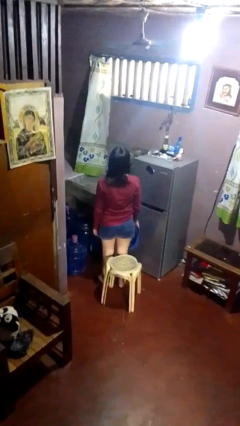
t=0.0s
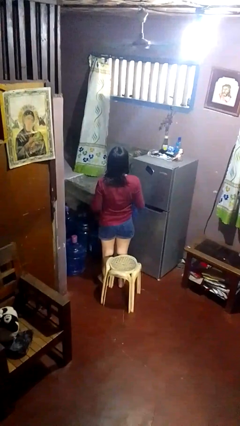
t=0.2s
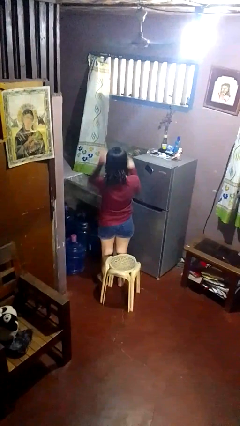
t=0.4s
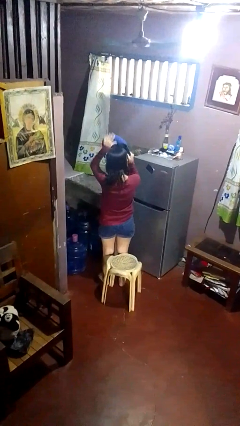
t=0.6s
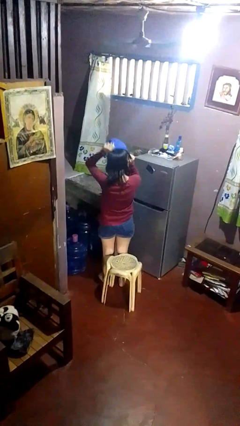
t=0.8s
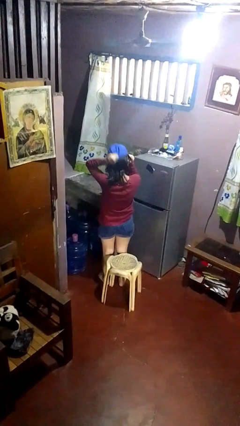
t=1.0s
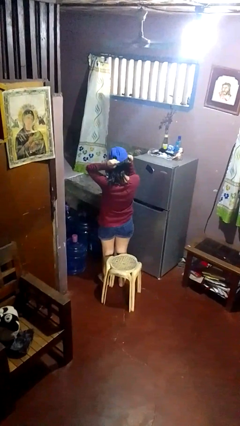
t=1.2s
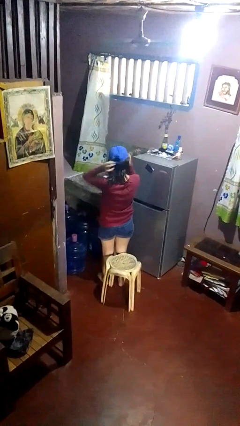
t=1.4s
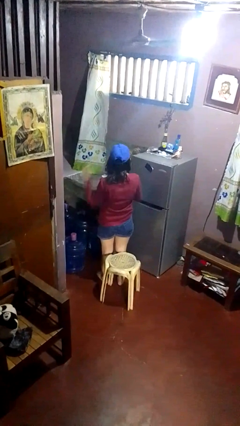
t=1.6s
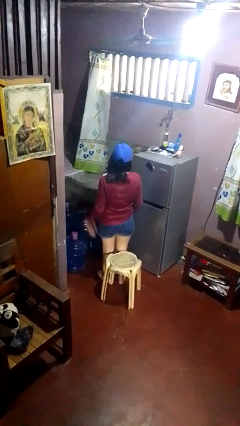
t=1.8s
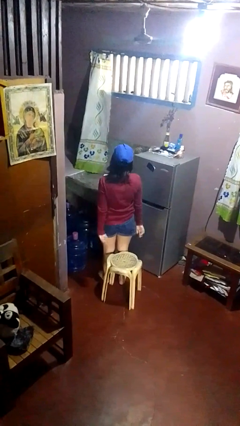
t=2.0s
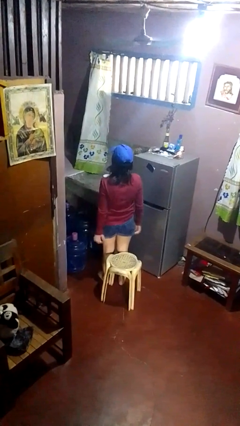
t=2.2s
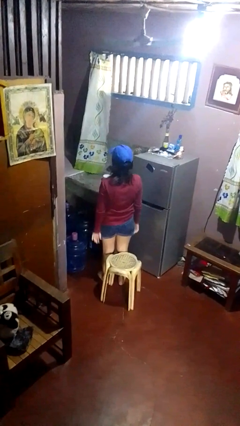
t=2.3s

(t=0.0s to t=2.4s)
person puts on hat

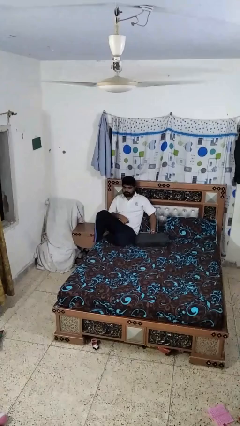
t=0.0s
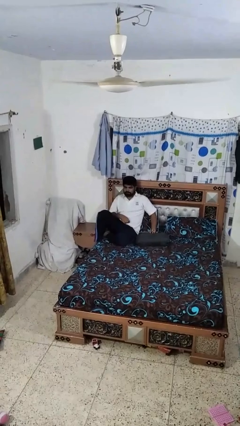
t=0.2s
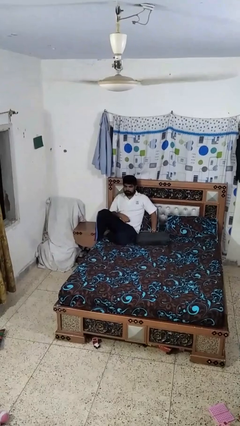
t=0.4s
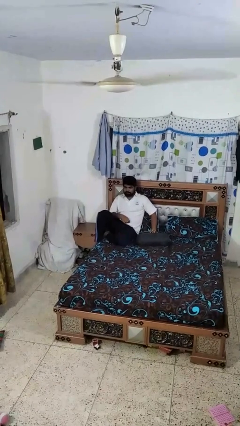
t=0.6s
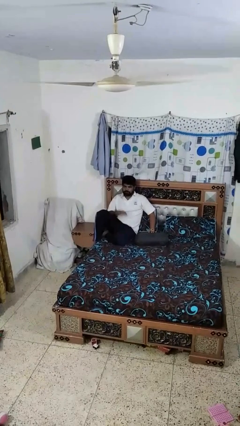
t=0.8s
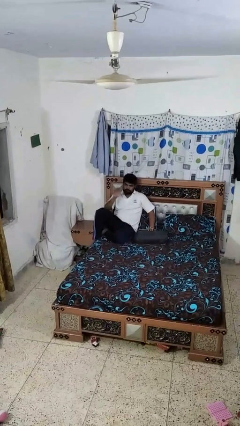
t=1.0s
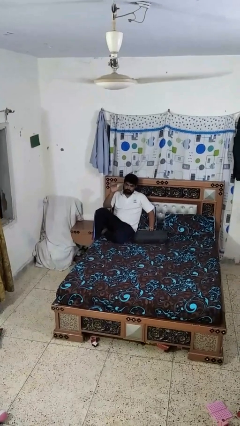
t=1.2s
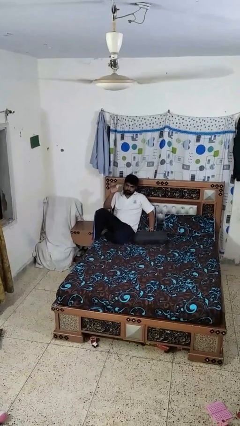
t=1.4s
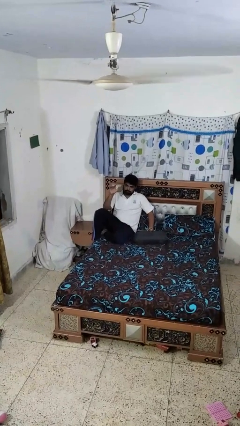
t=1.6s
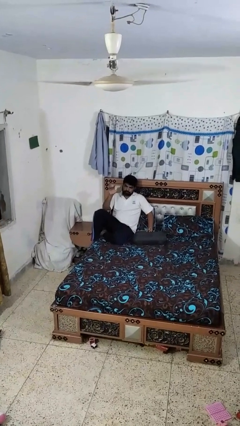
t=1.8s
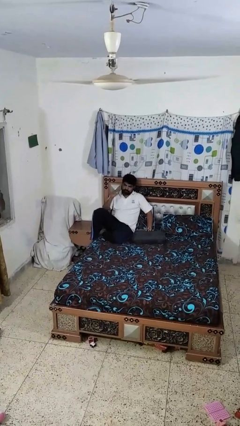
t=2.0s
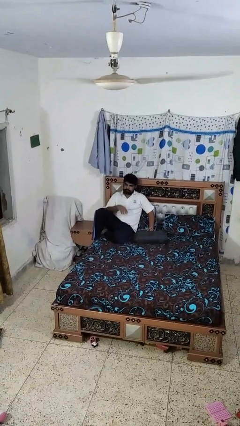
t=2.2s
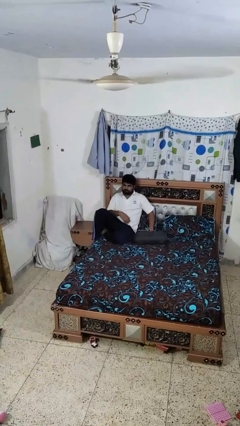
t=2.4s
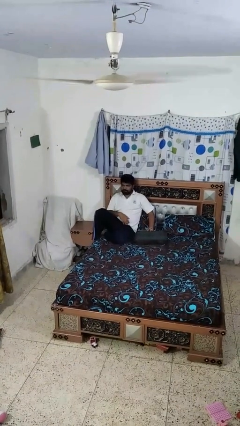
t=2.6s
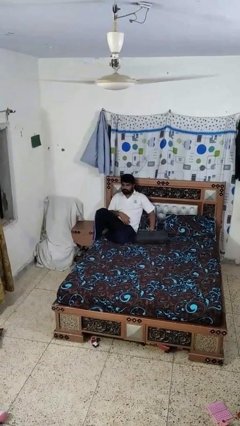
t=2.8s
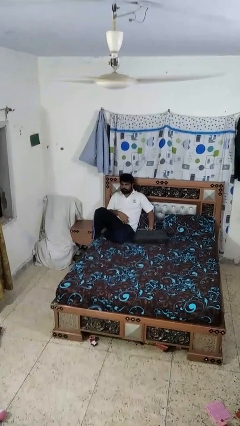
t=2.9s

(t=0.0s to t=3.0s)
person gestures come here

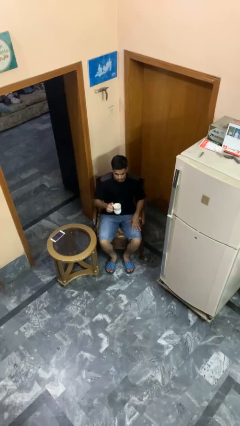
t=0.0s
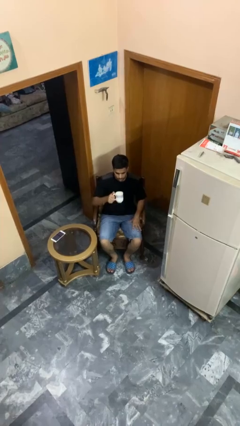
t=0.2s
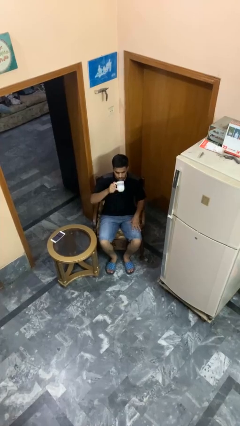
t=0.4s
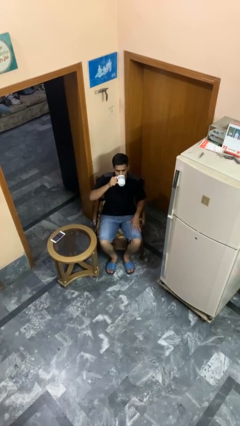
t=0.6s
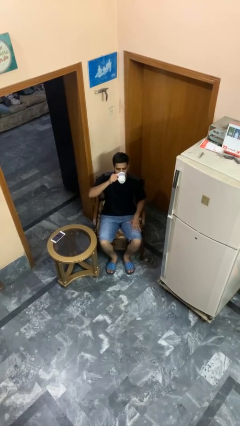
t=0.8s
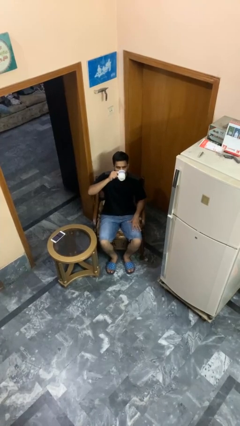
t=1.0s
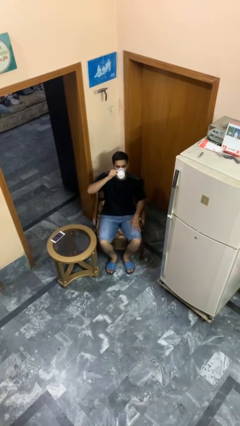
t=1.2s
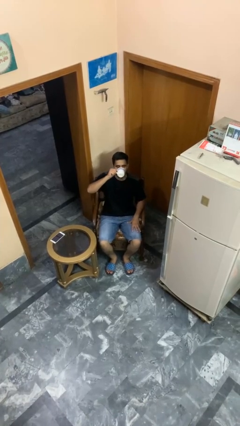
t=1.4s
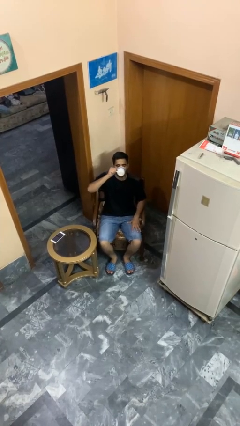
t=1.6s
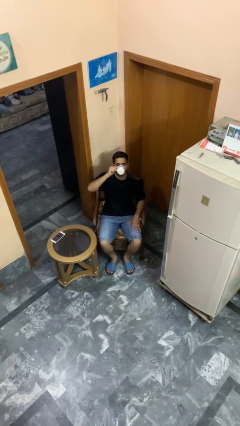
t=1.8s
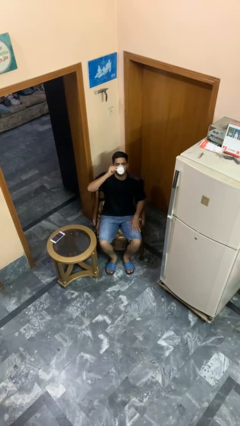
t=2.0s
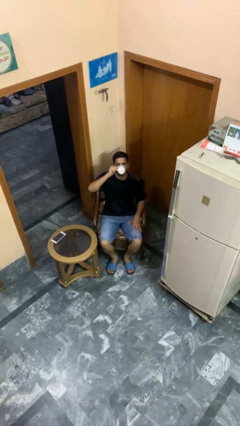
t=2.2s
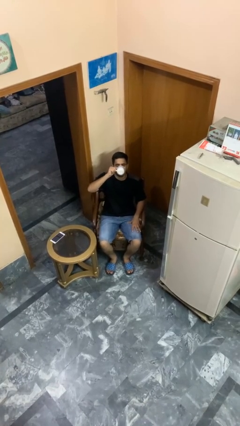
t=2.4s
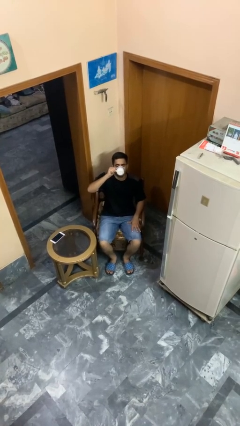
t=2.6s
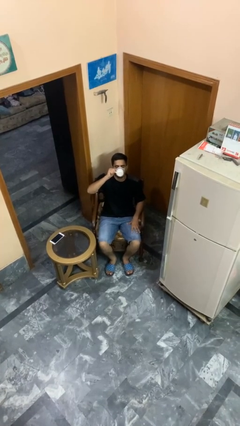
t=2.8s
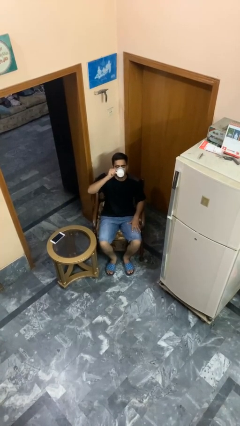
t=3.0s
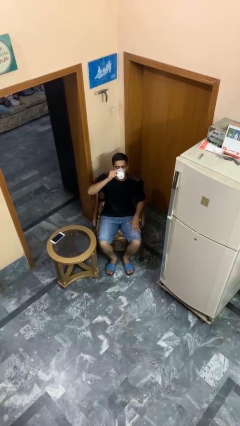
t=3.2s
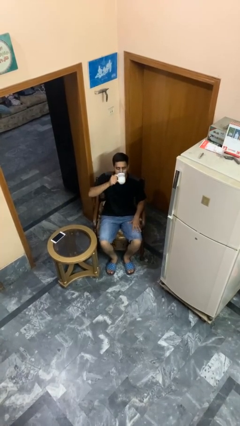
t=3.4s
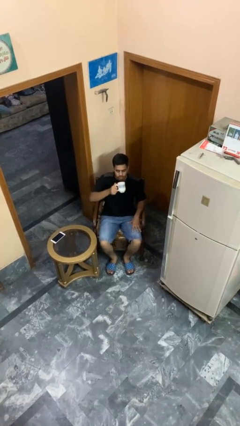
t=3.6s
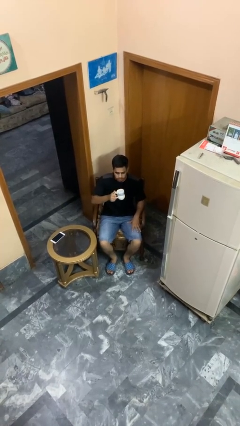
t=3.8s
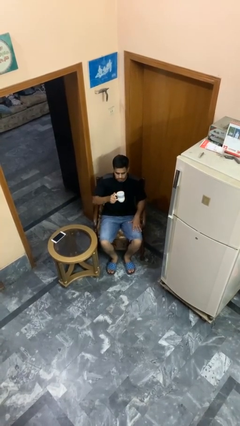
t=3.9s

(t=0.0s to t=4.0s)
person drinks from mug

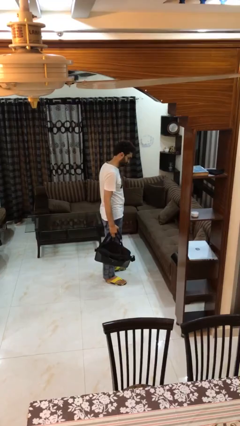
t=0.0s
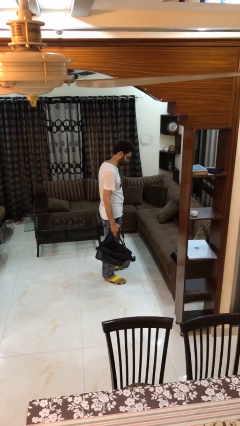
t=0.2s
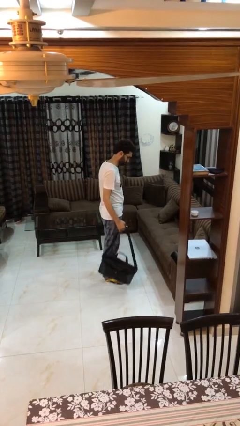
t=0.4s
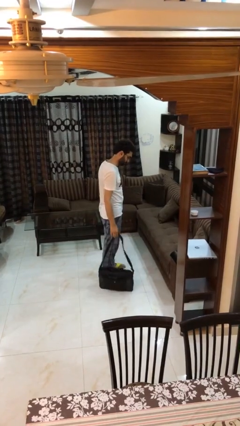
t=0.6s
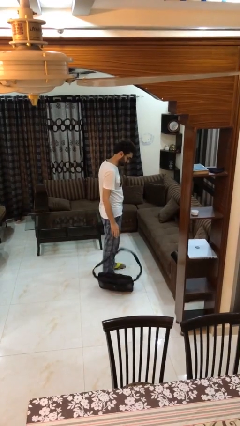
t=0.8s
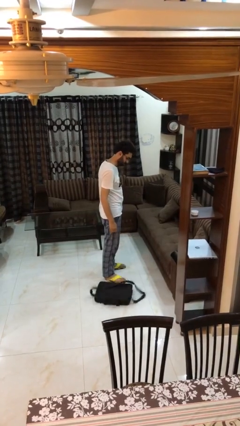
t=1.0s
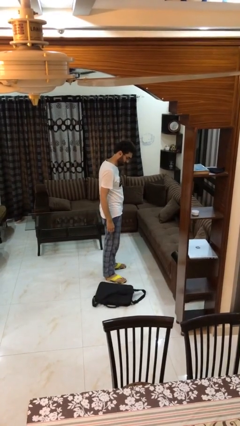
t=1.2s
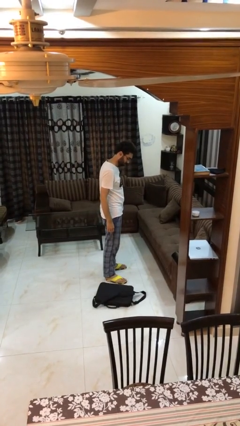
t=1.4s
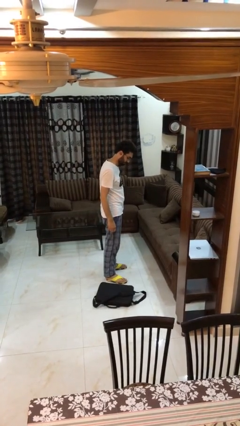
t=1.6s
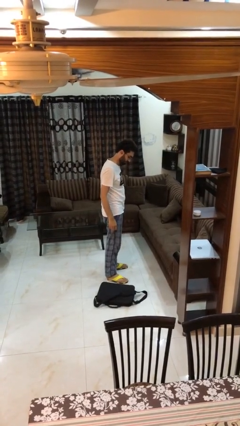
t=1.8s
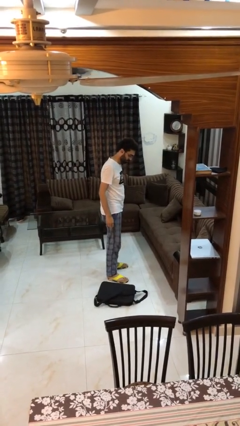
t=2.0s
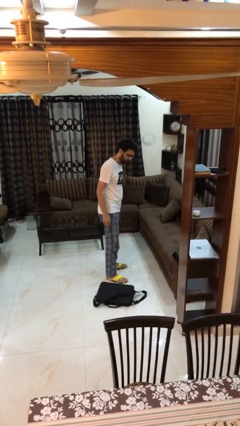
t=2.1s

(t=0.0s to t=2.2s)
person puts down object on floor

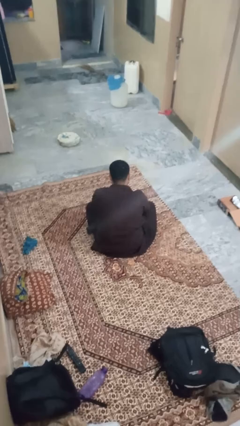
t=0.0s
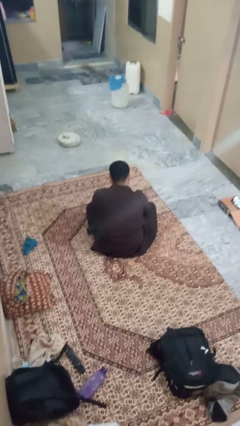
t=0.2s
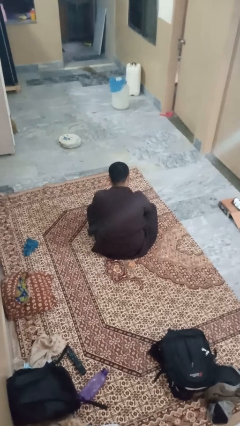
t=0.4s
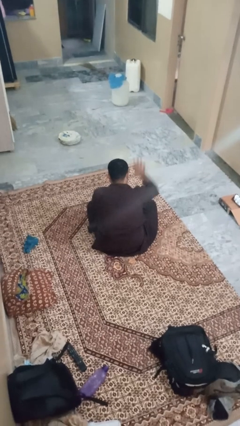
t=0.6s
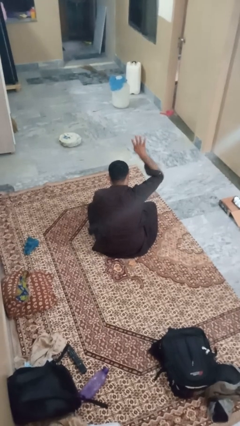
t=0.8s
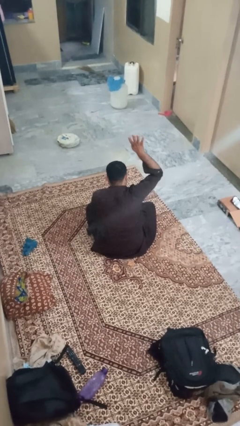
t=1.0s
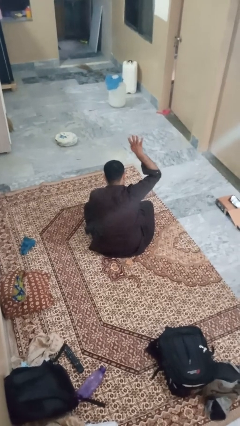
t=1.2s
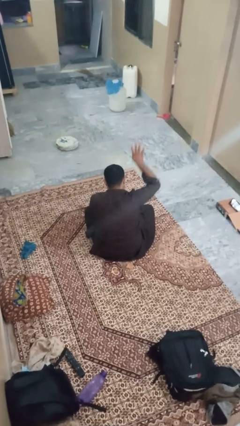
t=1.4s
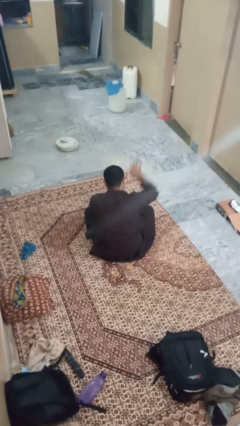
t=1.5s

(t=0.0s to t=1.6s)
person gestures number four

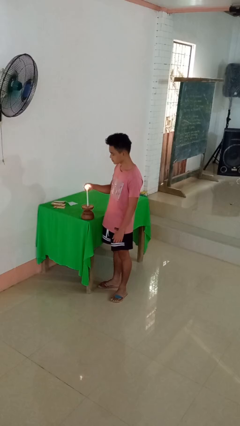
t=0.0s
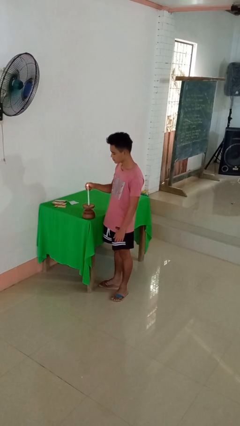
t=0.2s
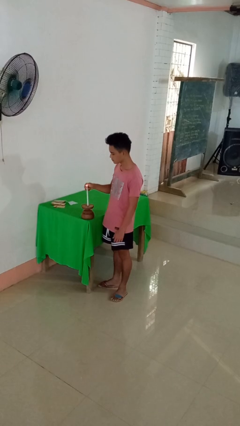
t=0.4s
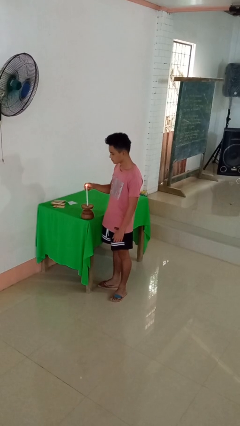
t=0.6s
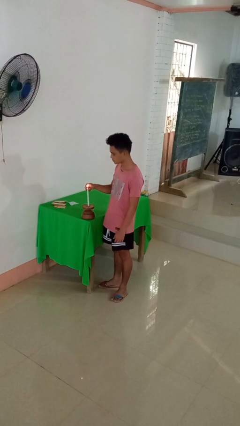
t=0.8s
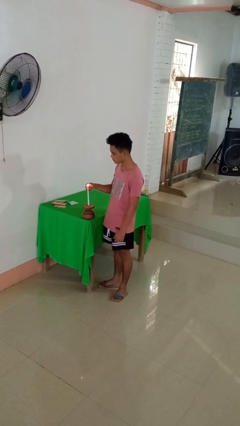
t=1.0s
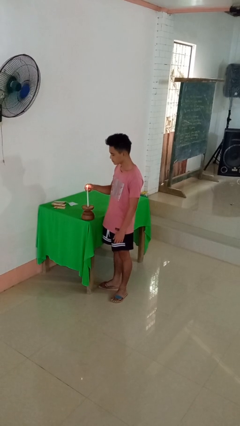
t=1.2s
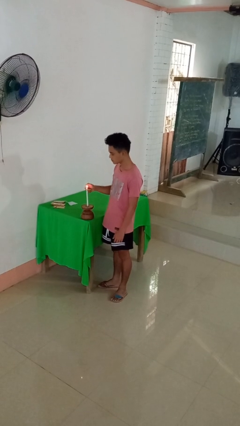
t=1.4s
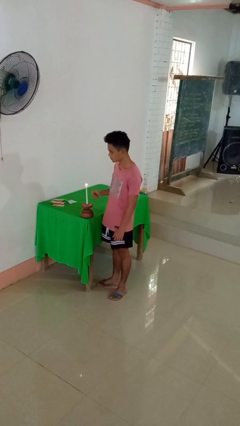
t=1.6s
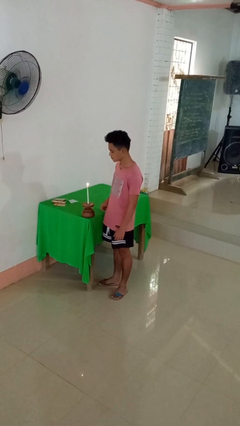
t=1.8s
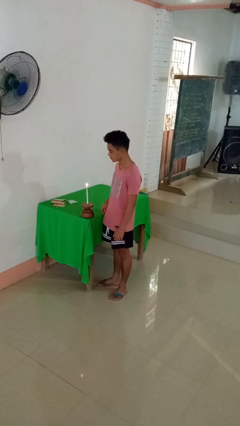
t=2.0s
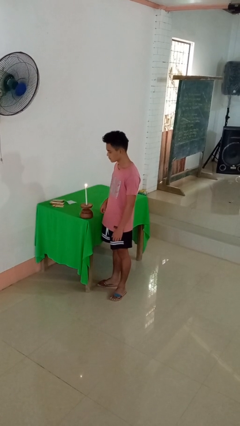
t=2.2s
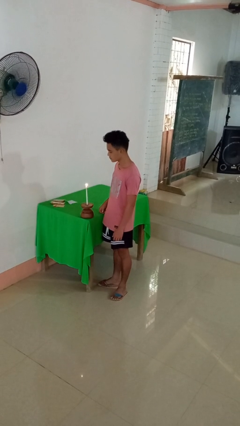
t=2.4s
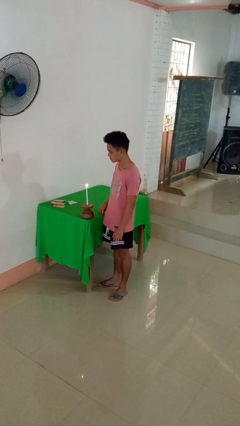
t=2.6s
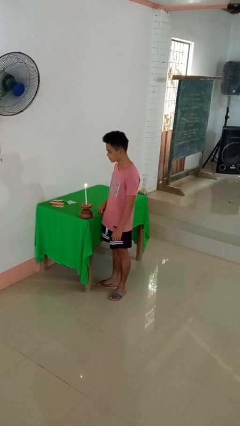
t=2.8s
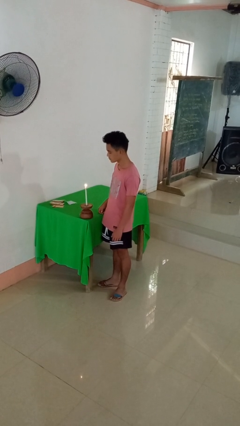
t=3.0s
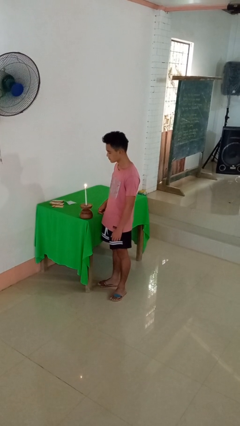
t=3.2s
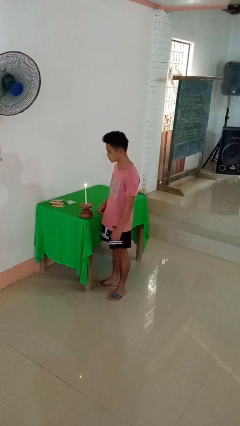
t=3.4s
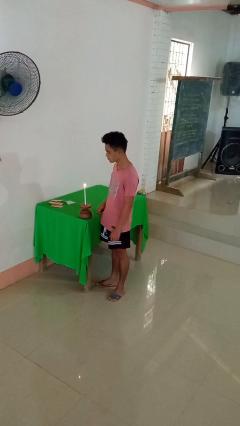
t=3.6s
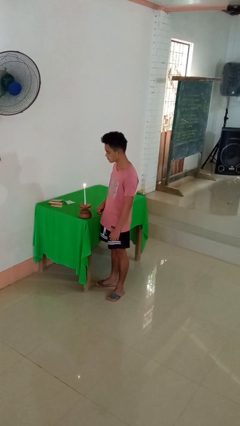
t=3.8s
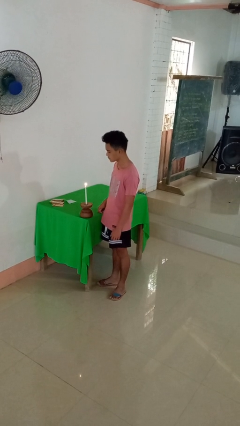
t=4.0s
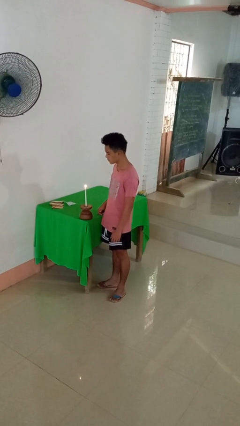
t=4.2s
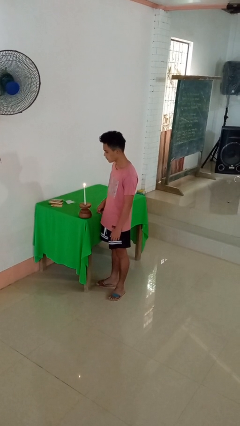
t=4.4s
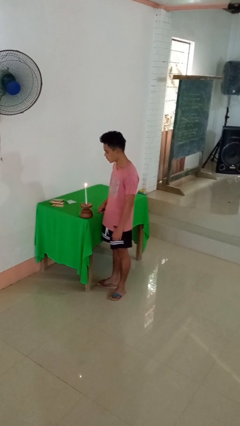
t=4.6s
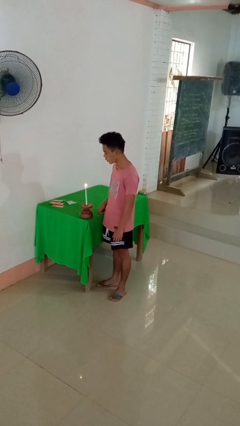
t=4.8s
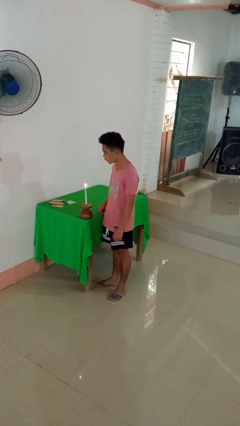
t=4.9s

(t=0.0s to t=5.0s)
person lights candle
